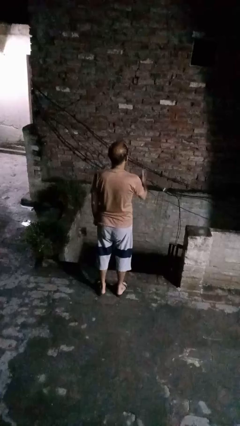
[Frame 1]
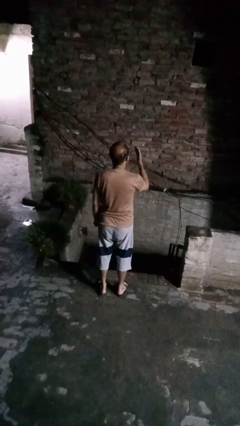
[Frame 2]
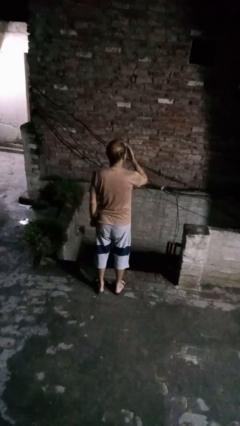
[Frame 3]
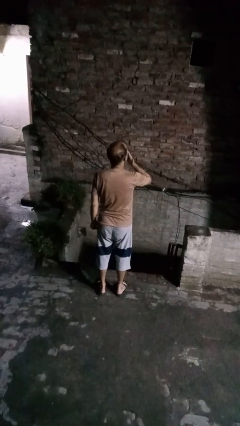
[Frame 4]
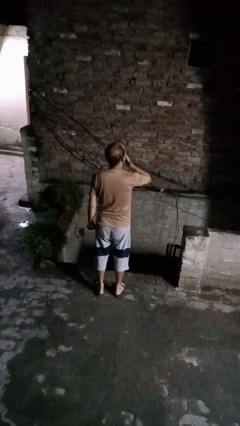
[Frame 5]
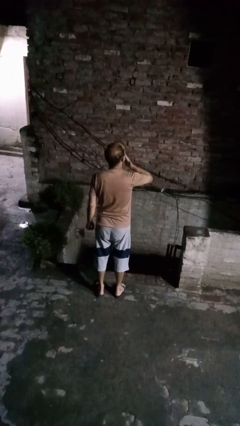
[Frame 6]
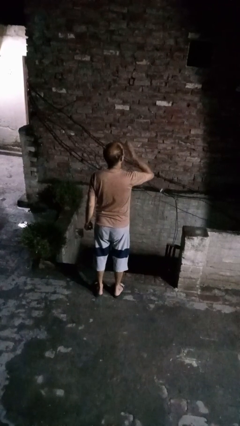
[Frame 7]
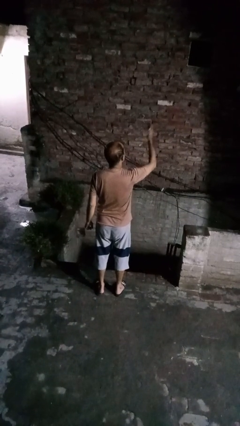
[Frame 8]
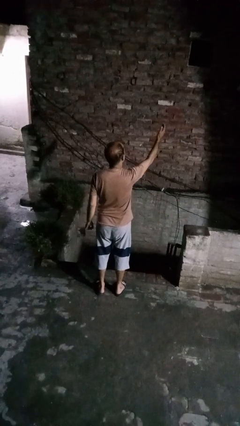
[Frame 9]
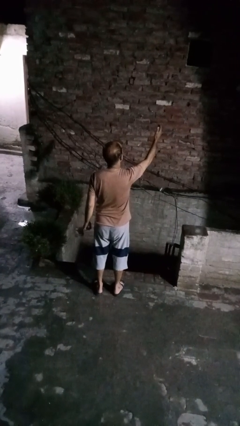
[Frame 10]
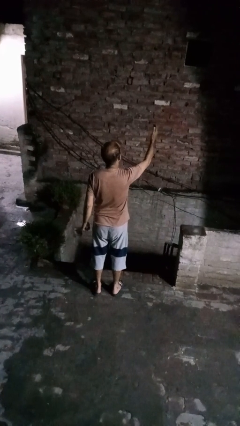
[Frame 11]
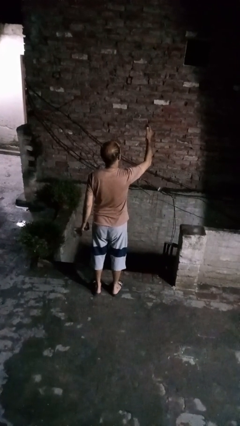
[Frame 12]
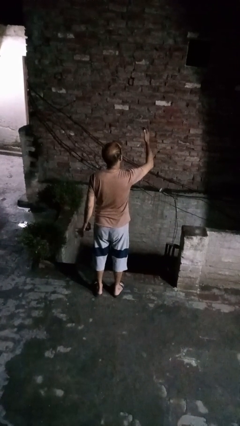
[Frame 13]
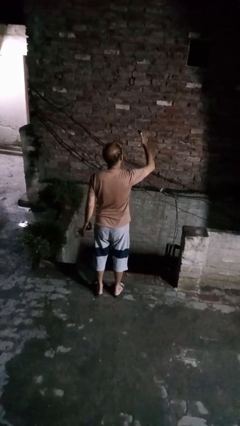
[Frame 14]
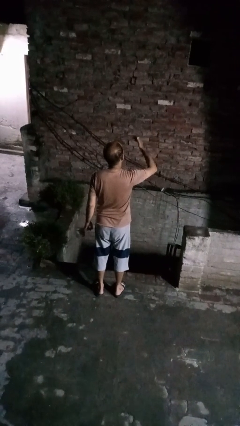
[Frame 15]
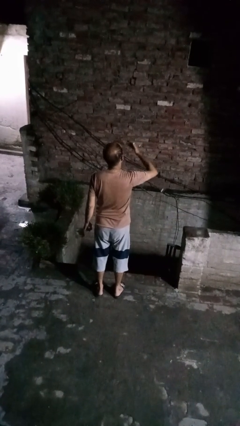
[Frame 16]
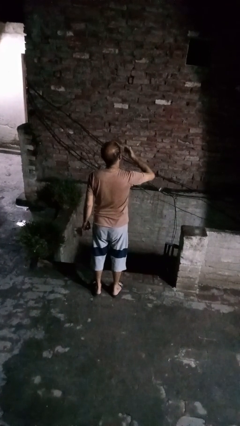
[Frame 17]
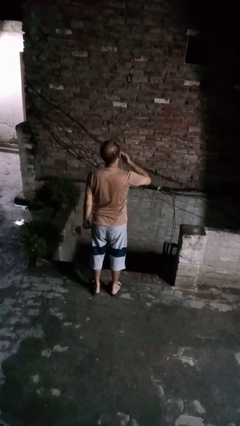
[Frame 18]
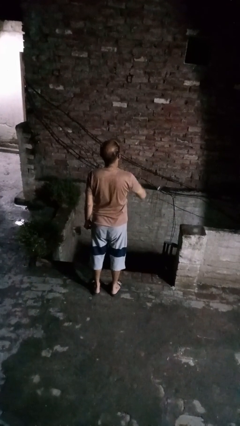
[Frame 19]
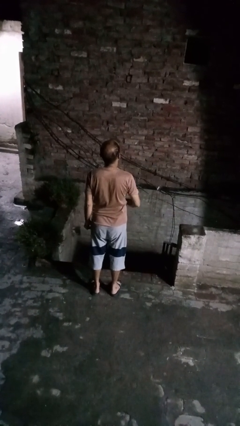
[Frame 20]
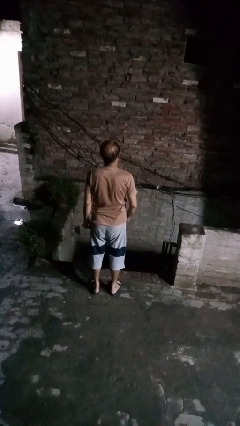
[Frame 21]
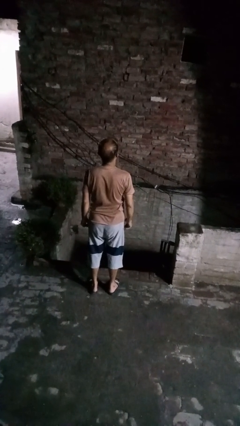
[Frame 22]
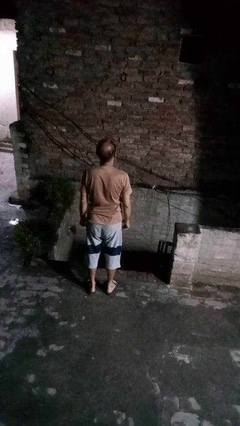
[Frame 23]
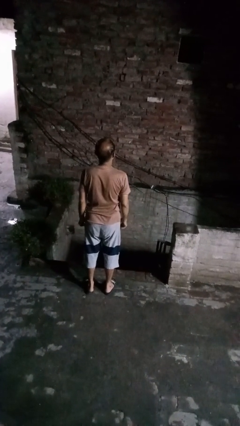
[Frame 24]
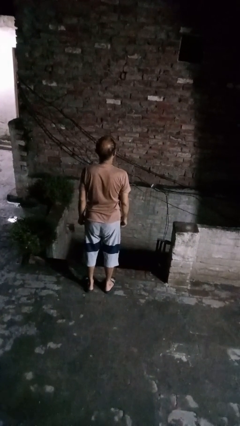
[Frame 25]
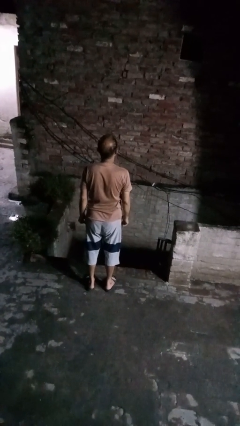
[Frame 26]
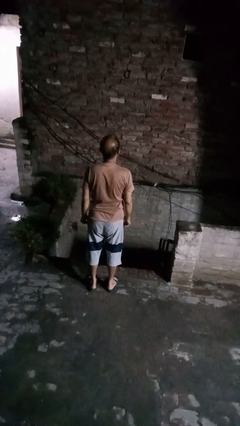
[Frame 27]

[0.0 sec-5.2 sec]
person gestures blow kiss

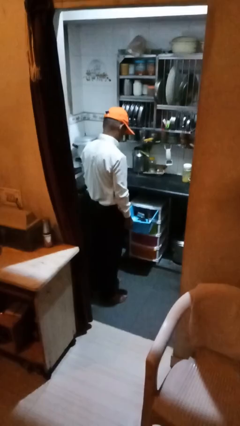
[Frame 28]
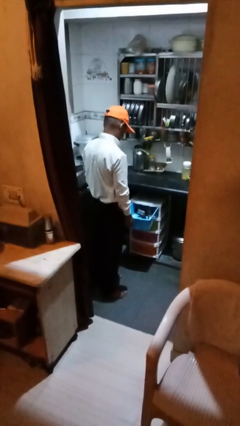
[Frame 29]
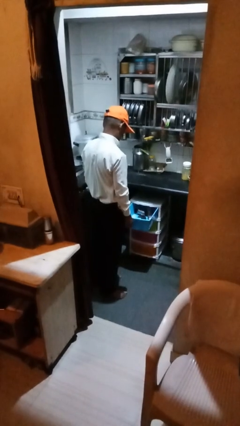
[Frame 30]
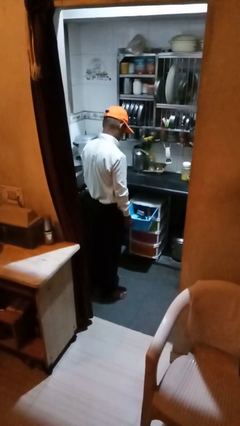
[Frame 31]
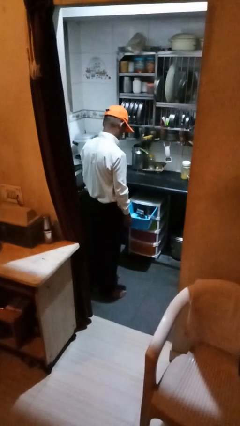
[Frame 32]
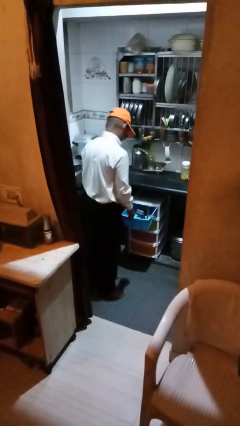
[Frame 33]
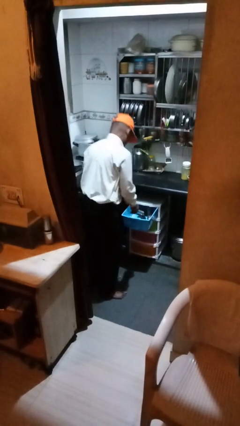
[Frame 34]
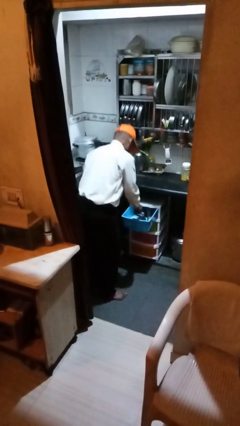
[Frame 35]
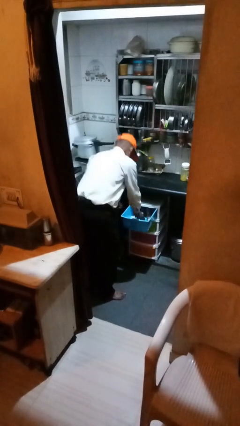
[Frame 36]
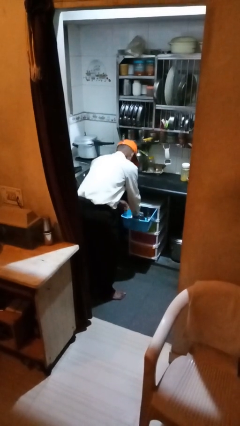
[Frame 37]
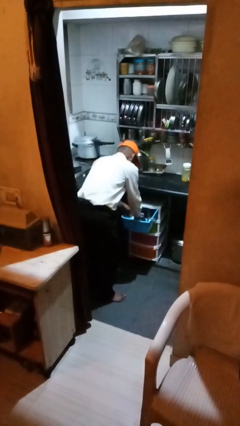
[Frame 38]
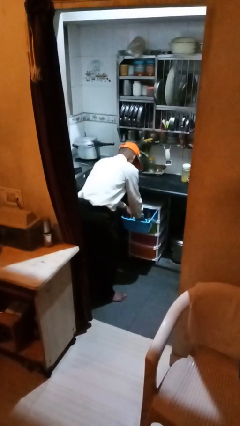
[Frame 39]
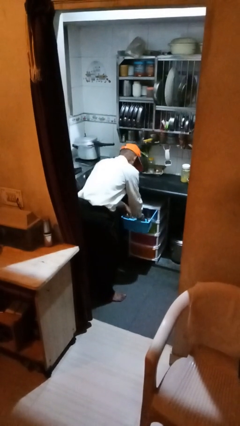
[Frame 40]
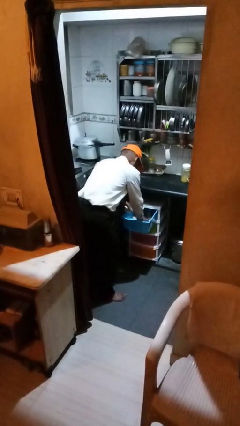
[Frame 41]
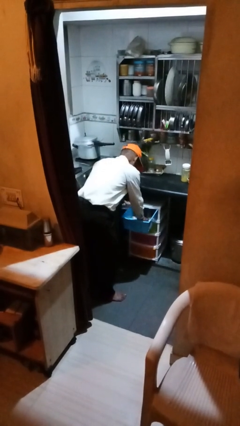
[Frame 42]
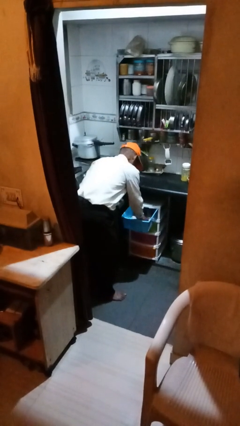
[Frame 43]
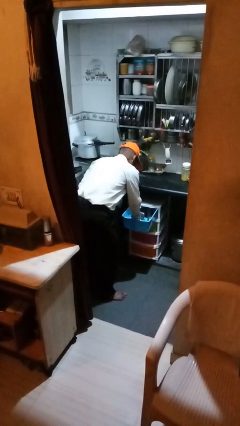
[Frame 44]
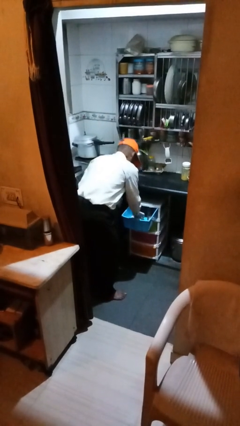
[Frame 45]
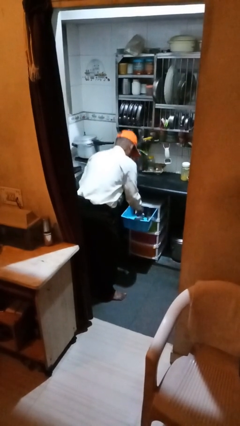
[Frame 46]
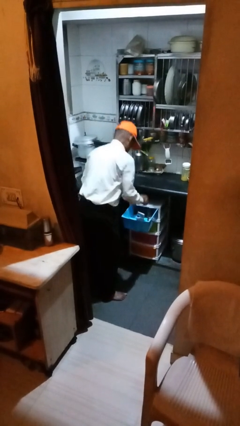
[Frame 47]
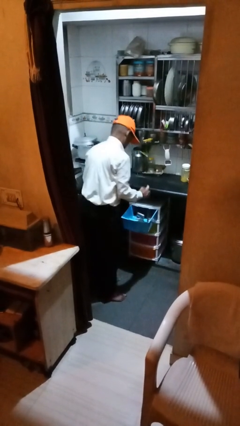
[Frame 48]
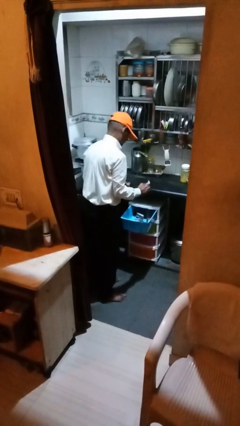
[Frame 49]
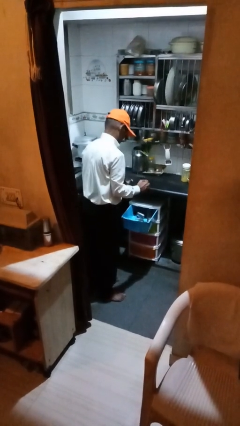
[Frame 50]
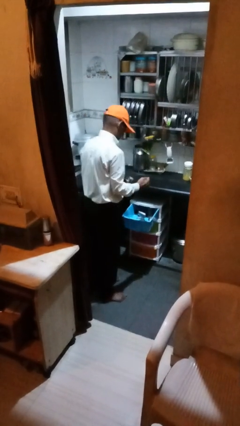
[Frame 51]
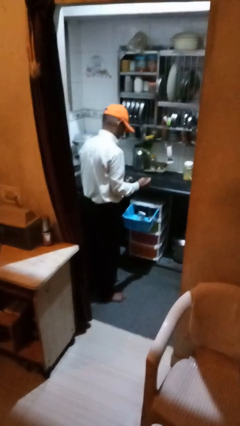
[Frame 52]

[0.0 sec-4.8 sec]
person takes object from kitchen drawer

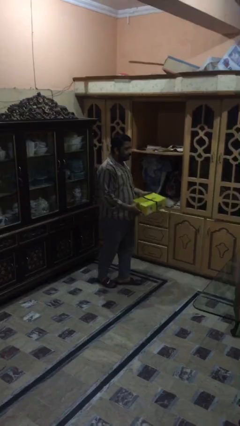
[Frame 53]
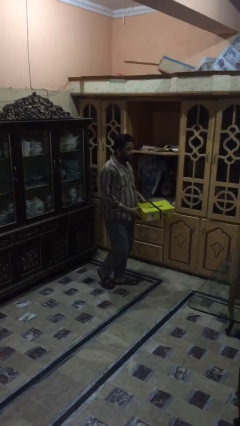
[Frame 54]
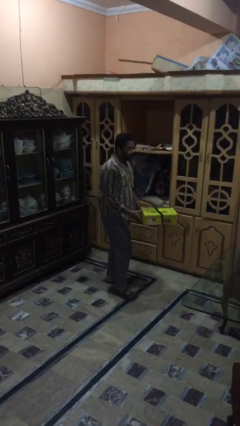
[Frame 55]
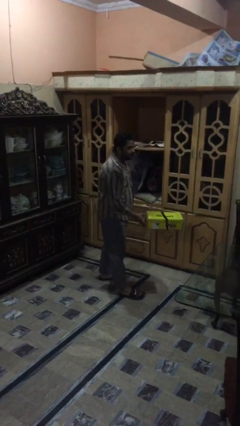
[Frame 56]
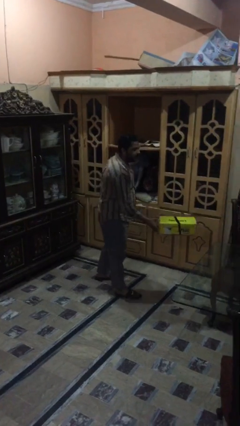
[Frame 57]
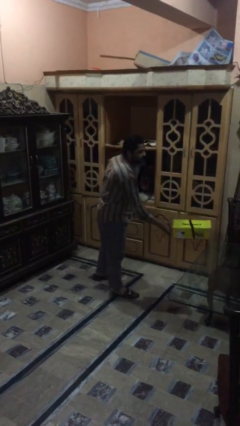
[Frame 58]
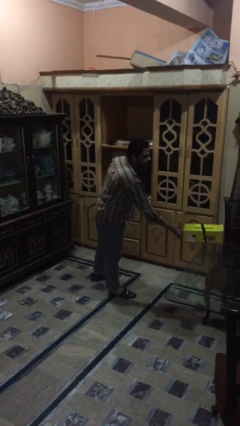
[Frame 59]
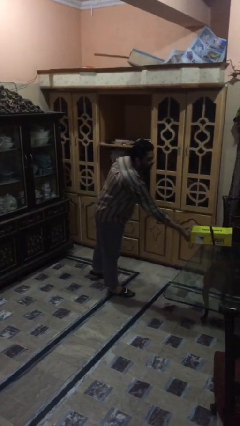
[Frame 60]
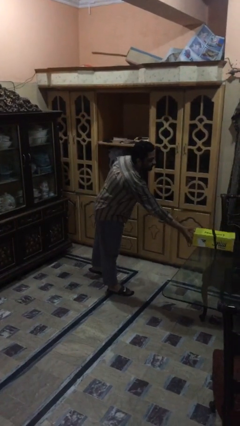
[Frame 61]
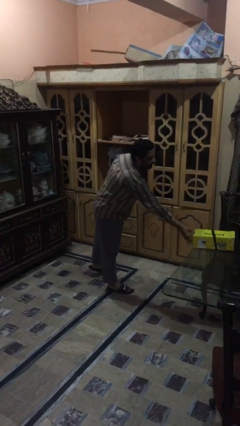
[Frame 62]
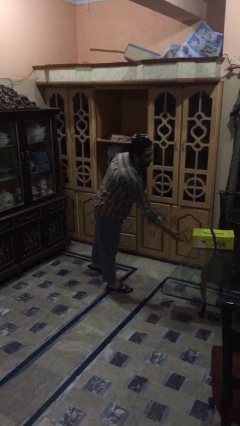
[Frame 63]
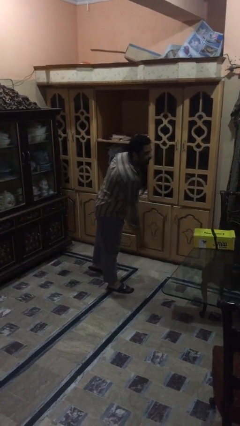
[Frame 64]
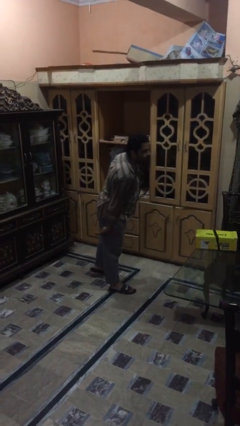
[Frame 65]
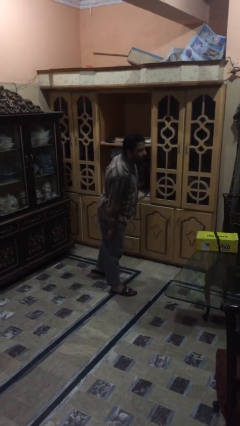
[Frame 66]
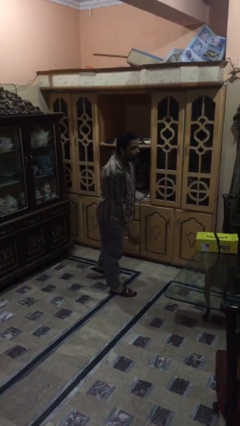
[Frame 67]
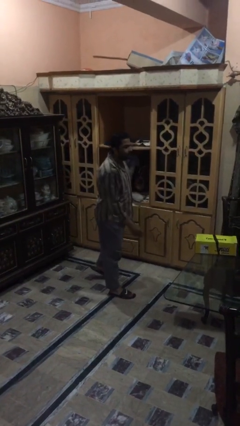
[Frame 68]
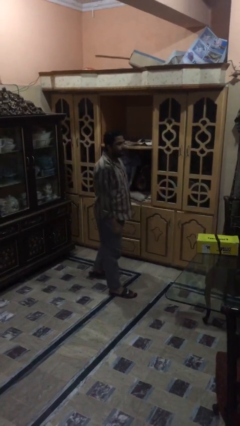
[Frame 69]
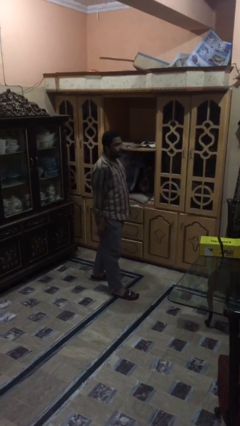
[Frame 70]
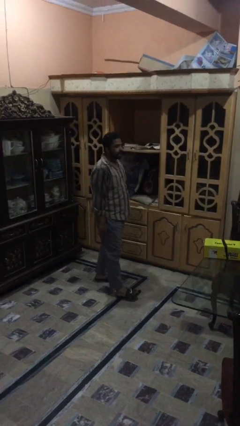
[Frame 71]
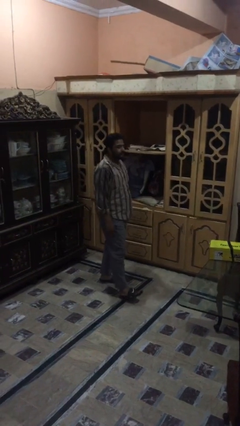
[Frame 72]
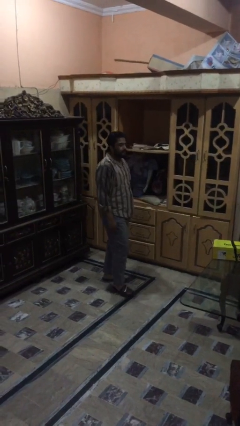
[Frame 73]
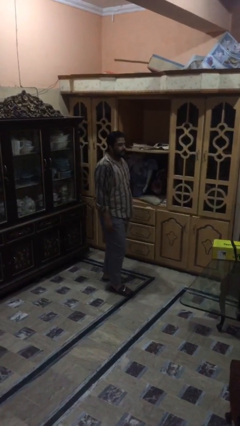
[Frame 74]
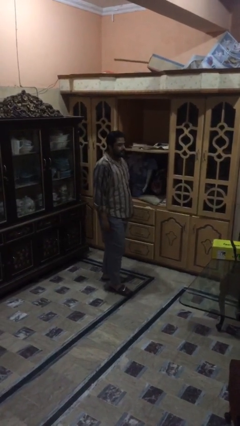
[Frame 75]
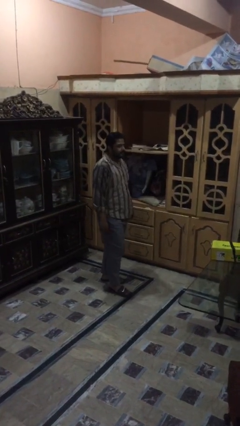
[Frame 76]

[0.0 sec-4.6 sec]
person puts down object on table

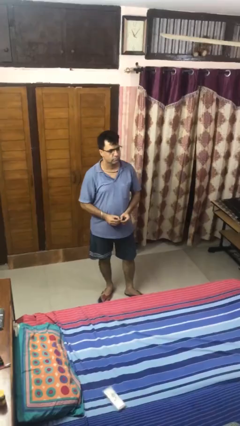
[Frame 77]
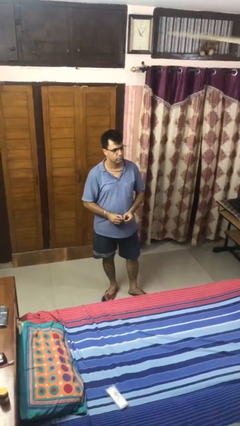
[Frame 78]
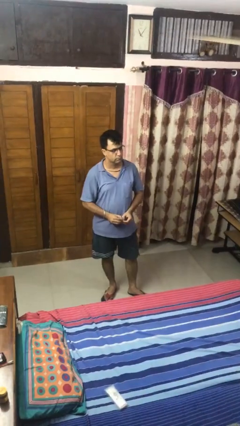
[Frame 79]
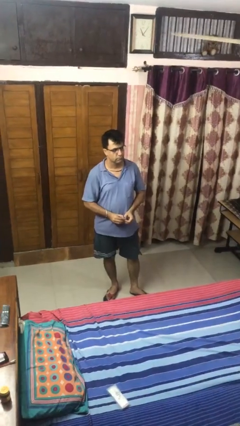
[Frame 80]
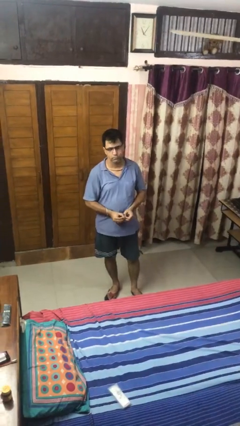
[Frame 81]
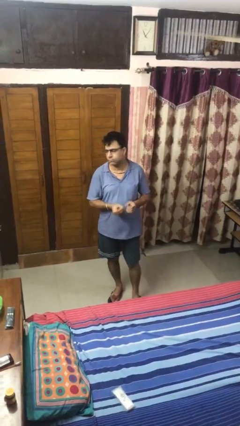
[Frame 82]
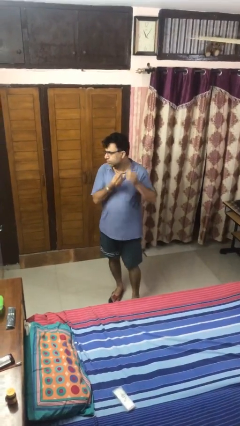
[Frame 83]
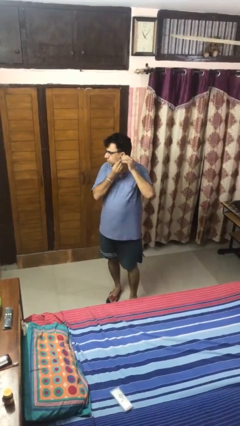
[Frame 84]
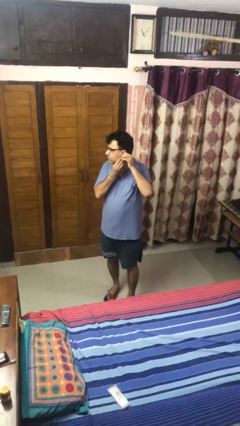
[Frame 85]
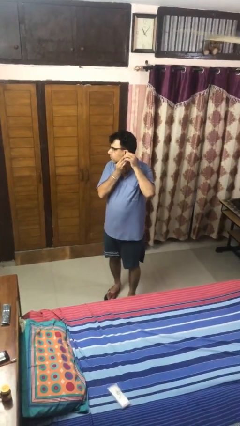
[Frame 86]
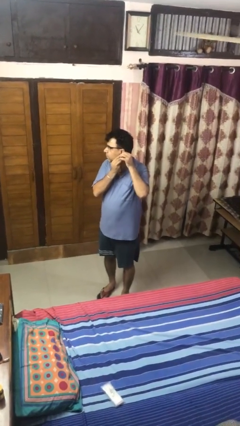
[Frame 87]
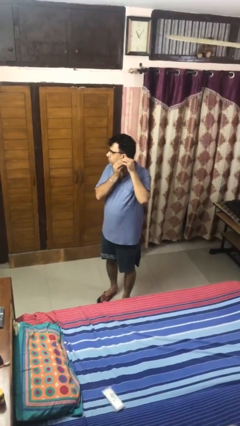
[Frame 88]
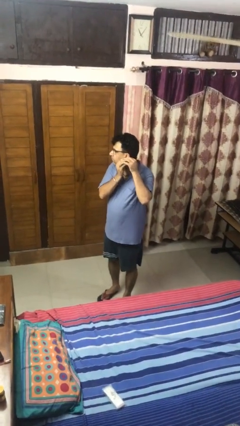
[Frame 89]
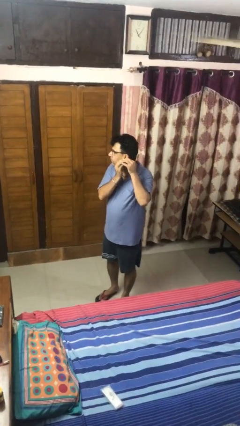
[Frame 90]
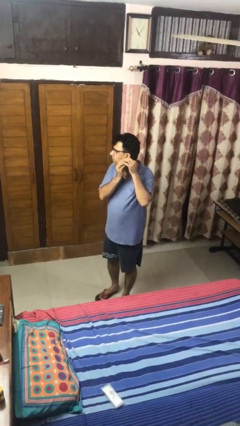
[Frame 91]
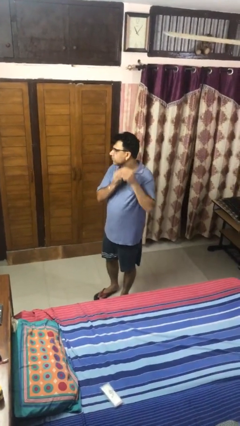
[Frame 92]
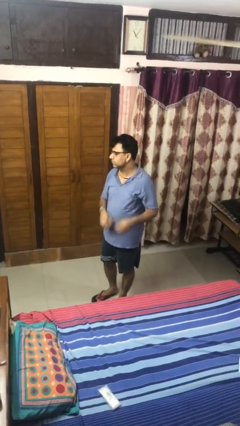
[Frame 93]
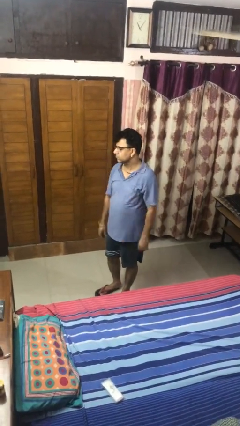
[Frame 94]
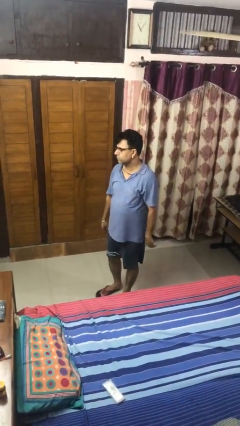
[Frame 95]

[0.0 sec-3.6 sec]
person puts on earrings
